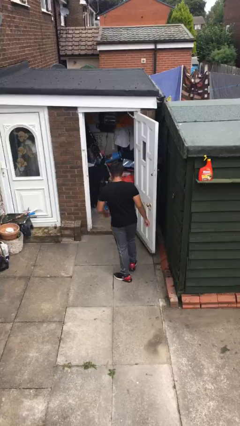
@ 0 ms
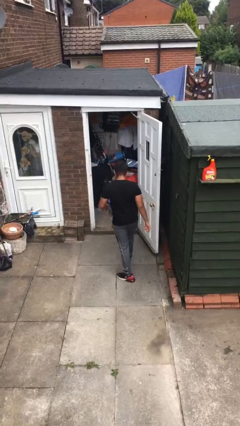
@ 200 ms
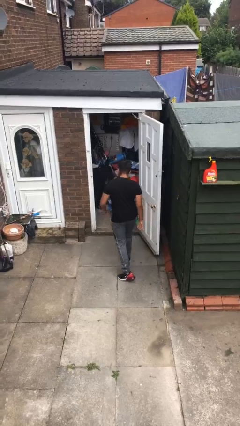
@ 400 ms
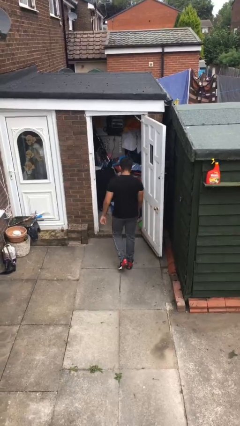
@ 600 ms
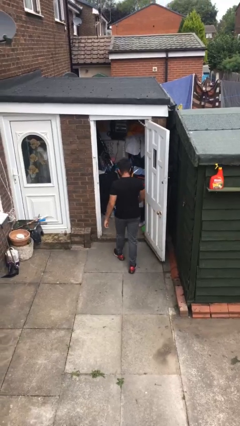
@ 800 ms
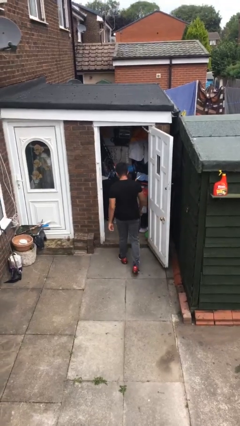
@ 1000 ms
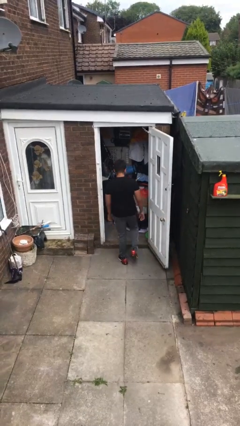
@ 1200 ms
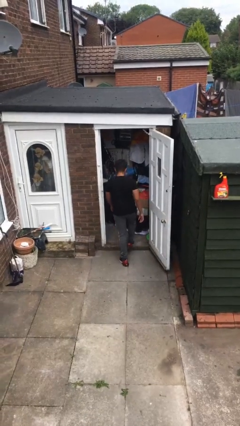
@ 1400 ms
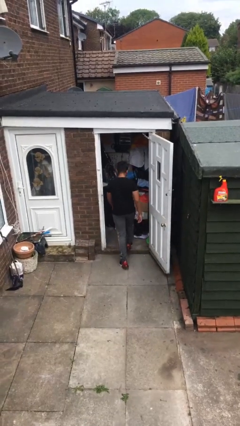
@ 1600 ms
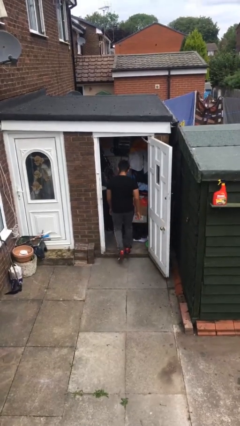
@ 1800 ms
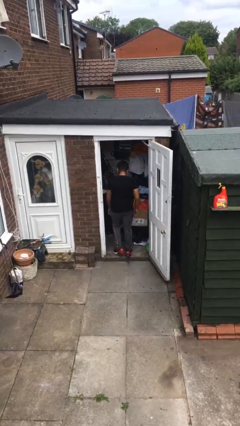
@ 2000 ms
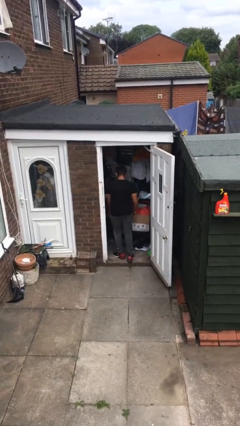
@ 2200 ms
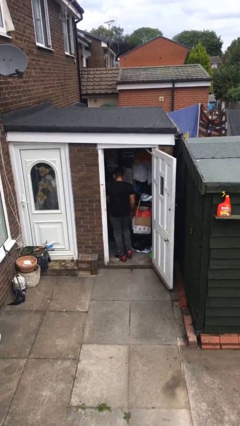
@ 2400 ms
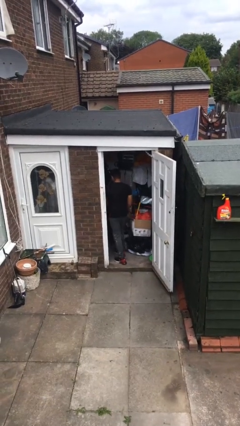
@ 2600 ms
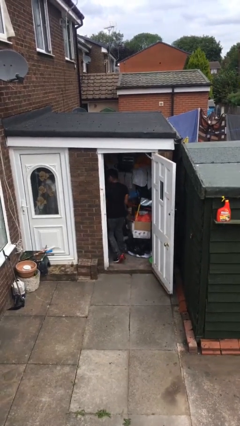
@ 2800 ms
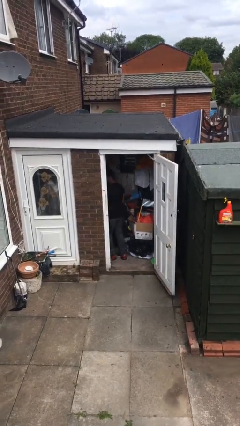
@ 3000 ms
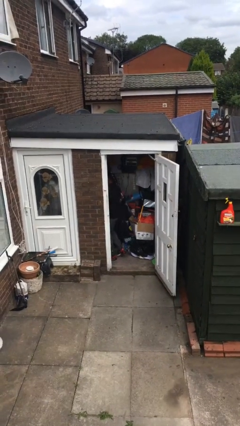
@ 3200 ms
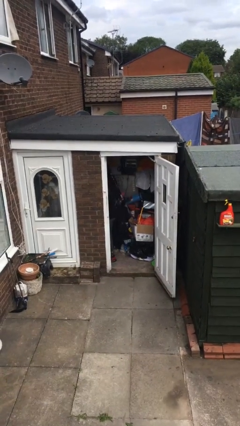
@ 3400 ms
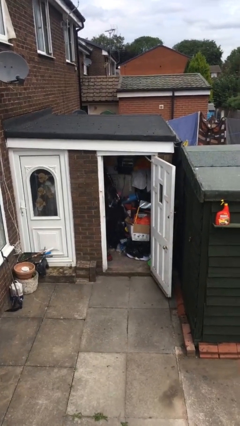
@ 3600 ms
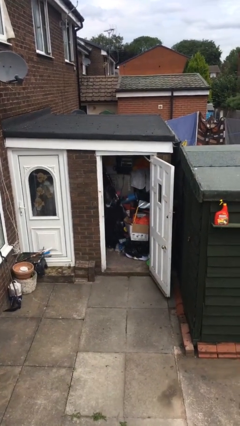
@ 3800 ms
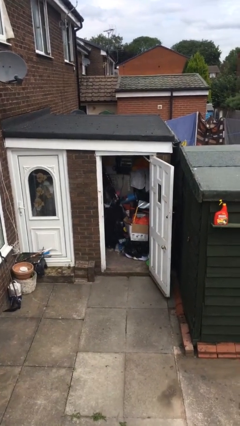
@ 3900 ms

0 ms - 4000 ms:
person exits scene through structure

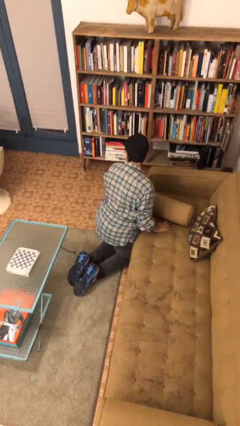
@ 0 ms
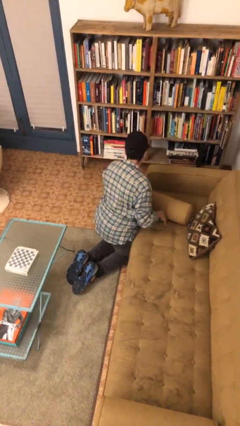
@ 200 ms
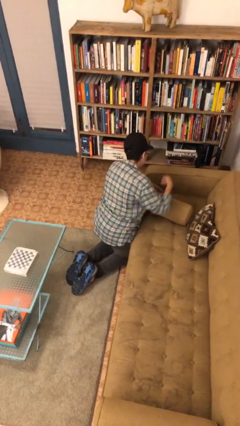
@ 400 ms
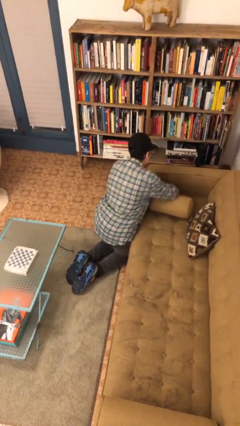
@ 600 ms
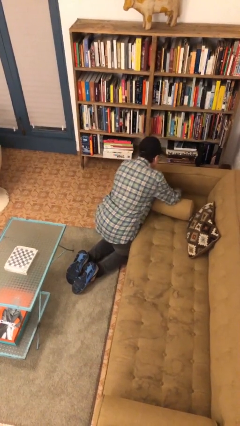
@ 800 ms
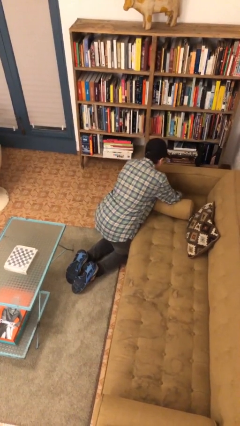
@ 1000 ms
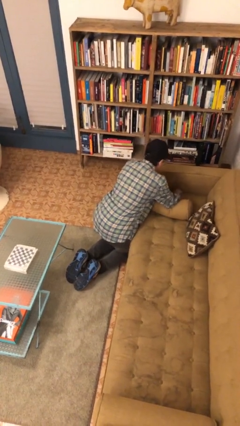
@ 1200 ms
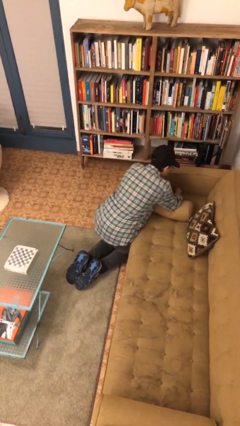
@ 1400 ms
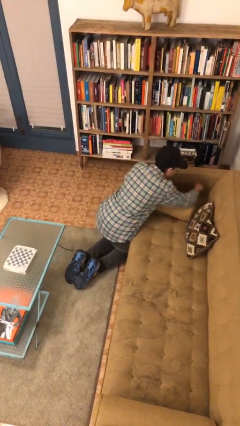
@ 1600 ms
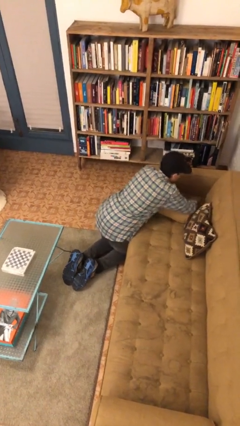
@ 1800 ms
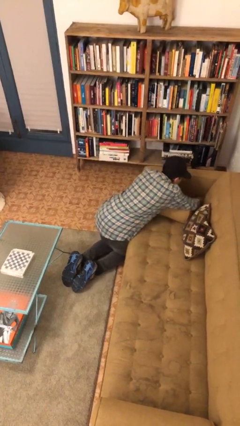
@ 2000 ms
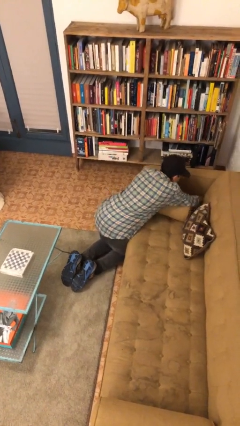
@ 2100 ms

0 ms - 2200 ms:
person searches in couch

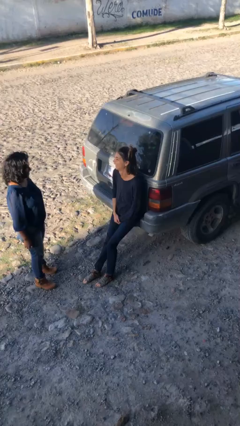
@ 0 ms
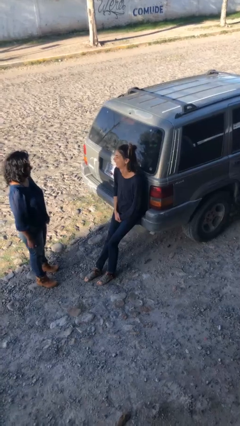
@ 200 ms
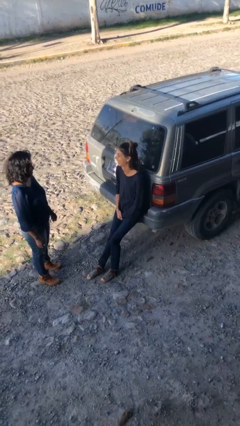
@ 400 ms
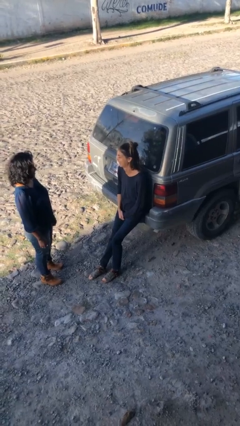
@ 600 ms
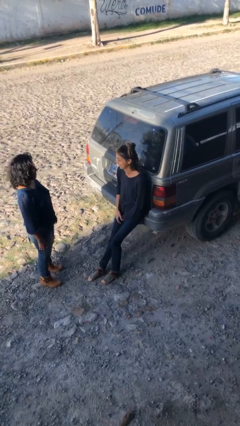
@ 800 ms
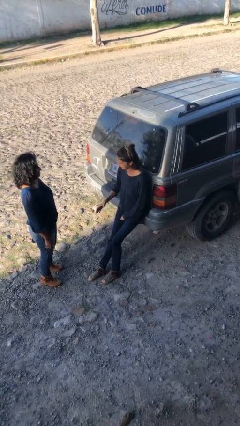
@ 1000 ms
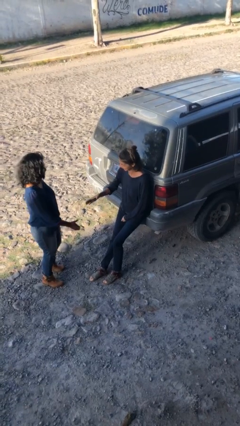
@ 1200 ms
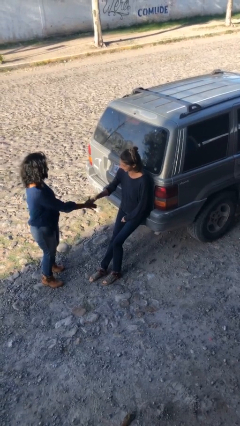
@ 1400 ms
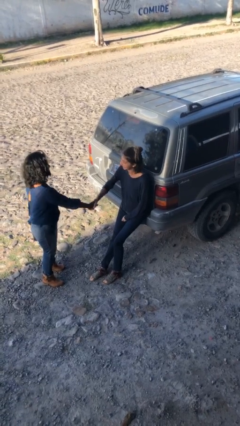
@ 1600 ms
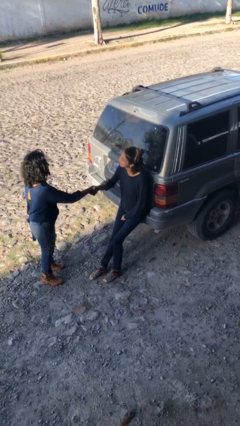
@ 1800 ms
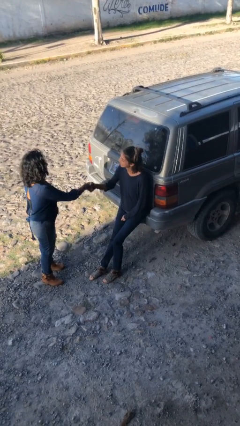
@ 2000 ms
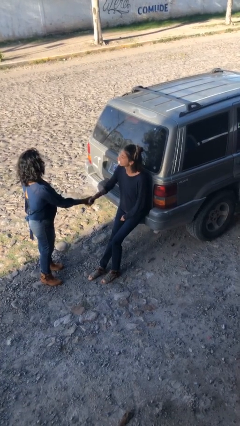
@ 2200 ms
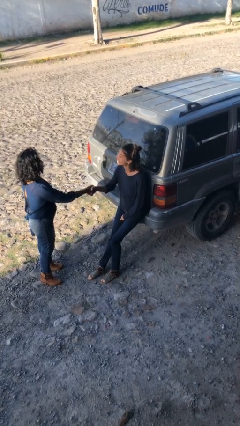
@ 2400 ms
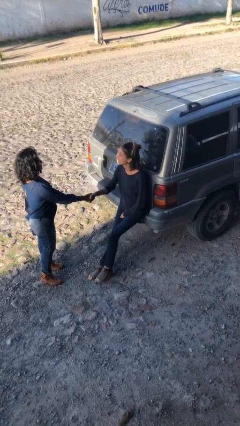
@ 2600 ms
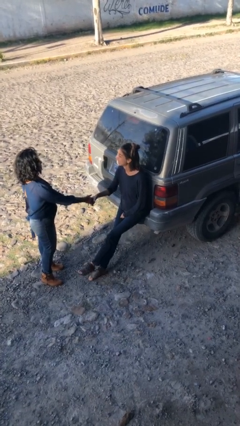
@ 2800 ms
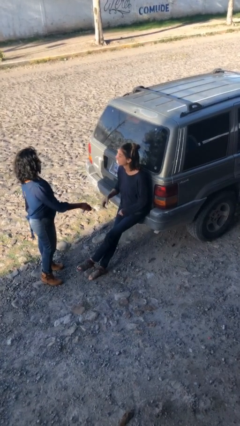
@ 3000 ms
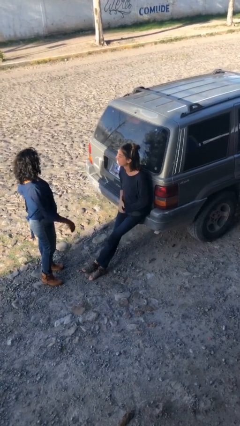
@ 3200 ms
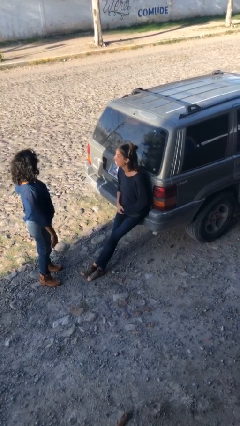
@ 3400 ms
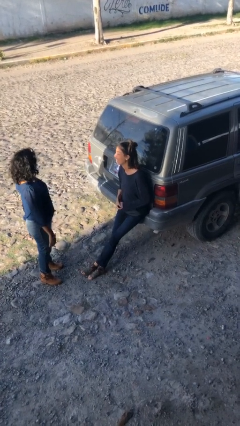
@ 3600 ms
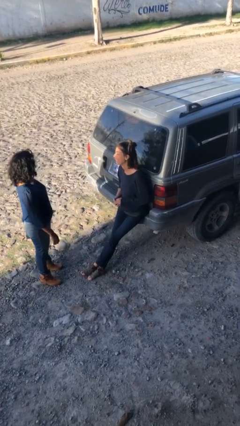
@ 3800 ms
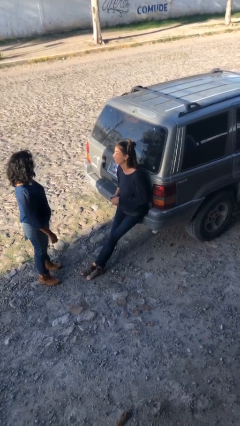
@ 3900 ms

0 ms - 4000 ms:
person shakes hand

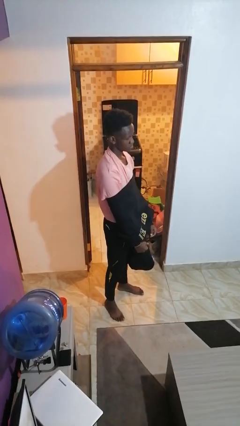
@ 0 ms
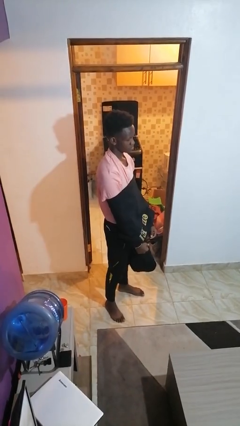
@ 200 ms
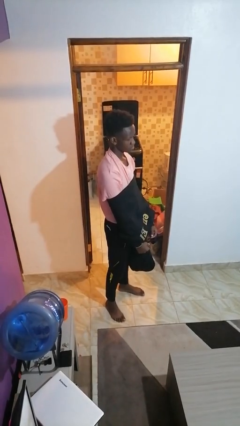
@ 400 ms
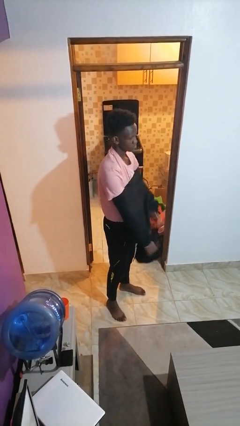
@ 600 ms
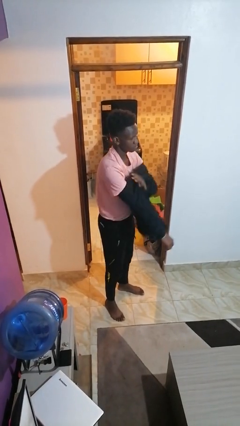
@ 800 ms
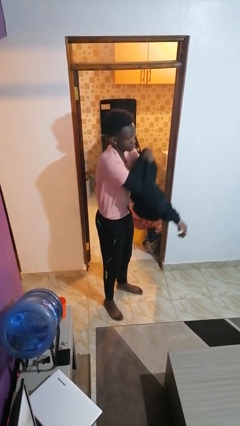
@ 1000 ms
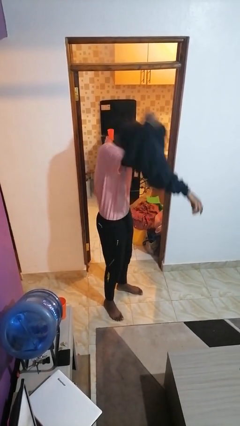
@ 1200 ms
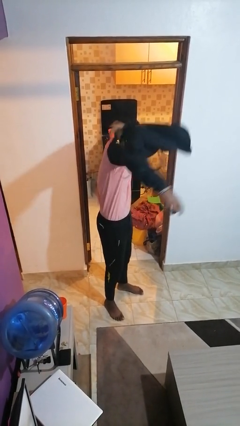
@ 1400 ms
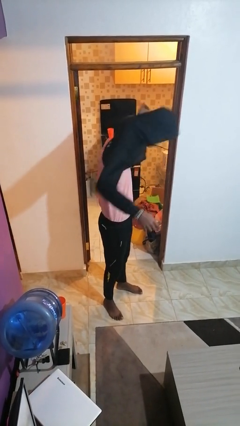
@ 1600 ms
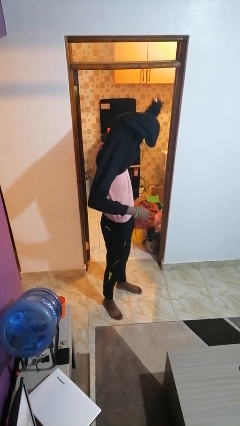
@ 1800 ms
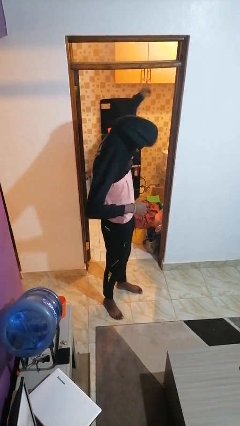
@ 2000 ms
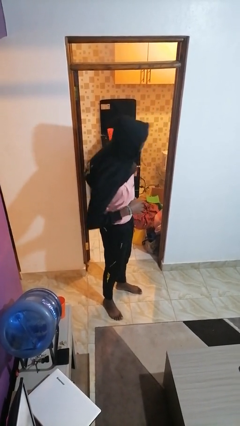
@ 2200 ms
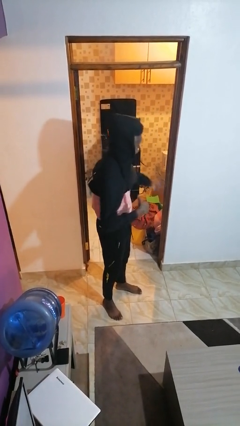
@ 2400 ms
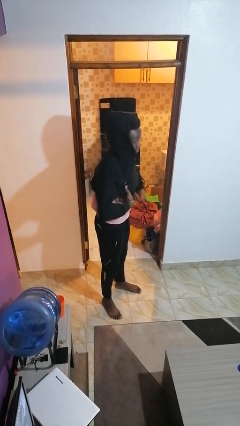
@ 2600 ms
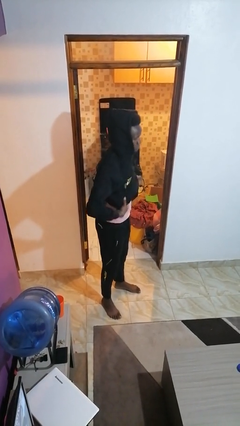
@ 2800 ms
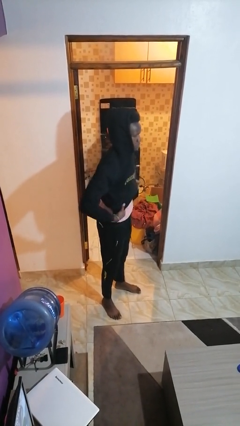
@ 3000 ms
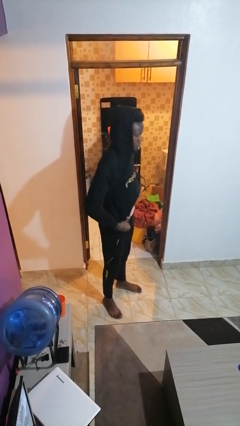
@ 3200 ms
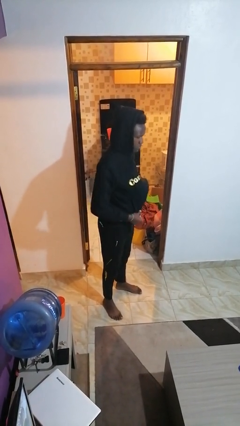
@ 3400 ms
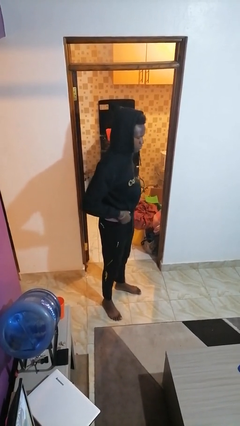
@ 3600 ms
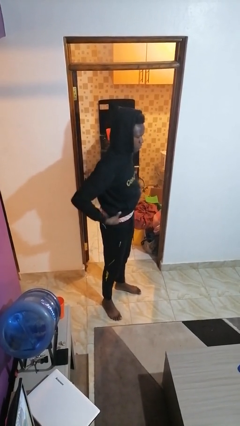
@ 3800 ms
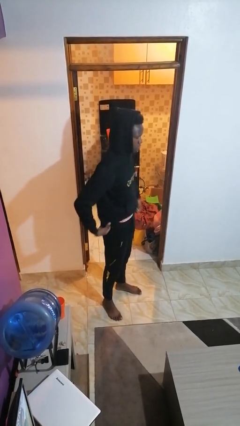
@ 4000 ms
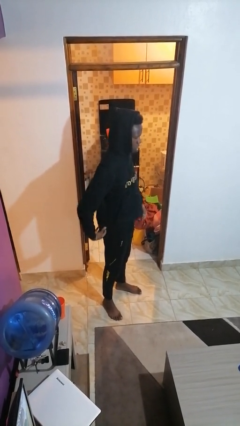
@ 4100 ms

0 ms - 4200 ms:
person puts on hoodie

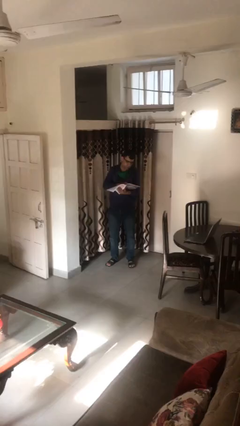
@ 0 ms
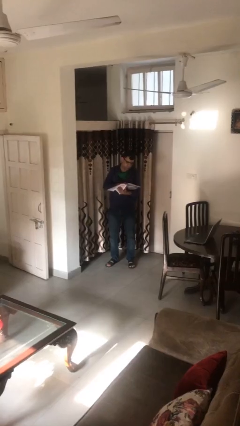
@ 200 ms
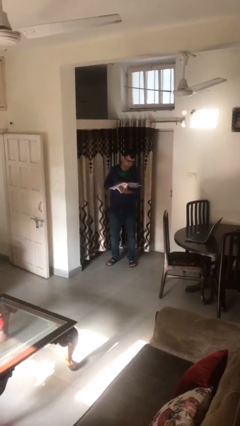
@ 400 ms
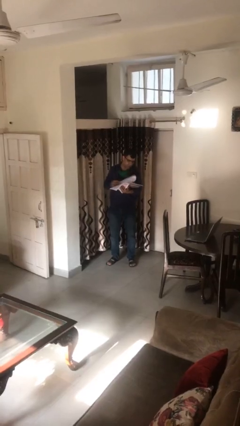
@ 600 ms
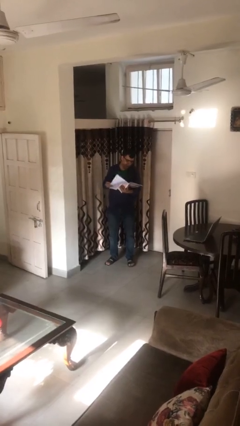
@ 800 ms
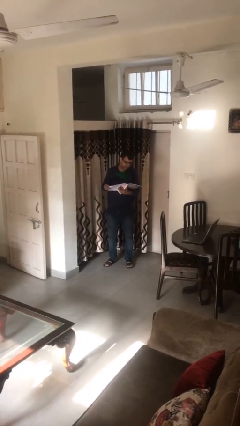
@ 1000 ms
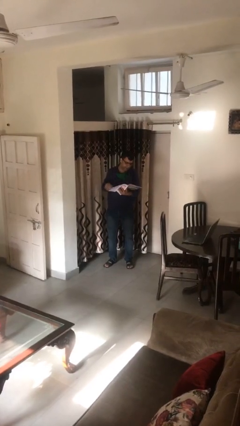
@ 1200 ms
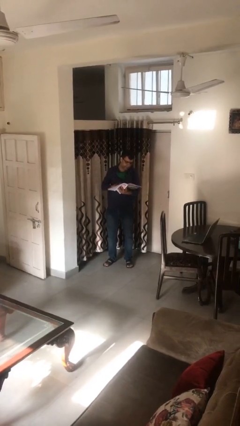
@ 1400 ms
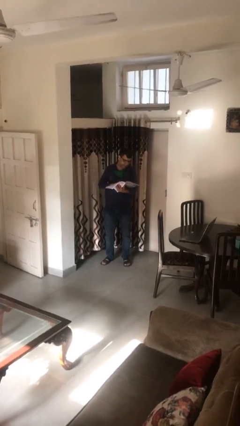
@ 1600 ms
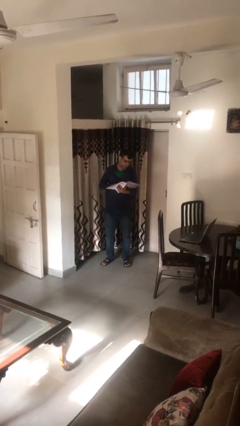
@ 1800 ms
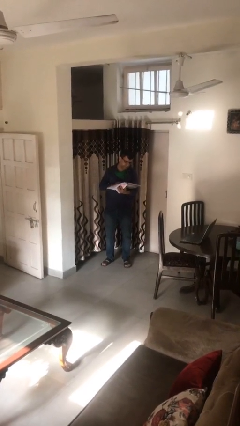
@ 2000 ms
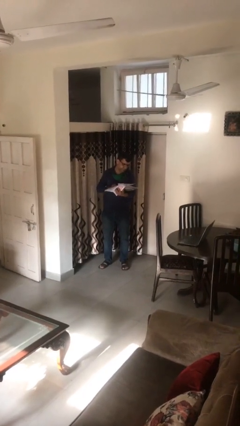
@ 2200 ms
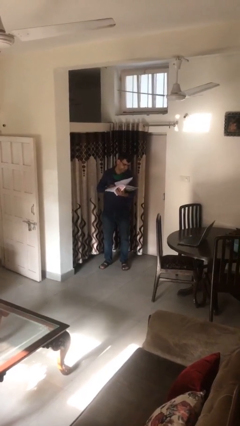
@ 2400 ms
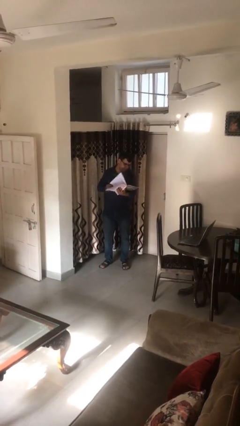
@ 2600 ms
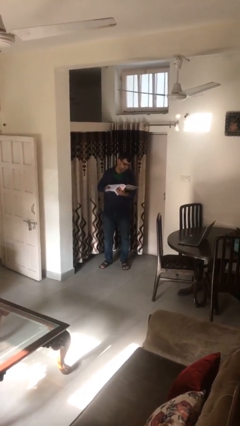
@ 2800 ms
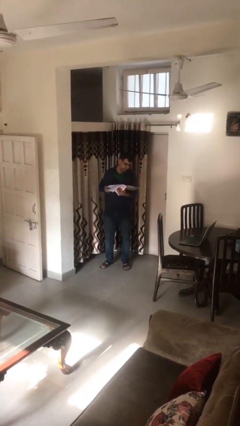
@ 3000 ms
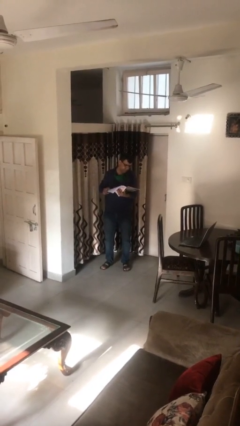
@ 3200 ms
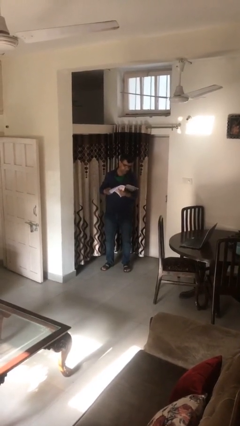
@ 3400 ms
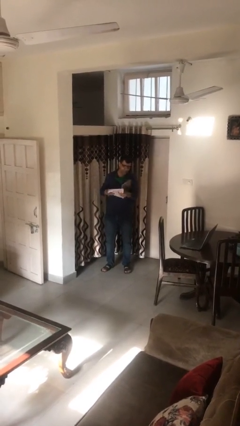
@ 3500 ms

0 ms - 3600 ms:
person reads document
